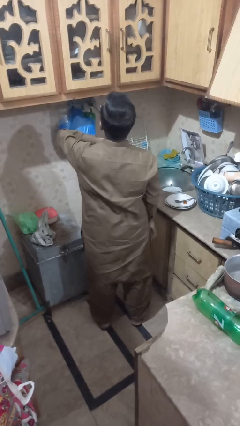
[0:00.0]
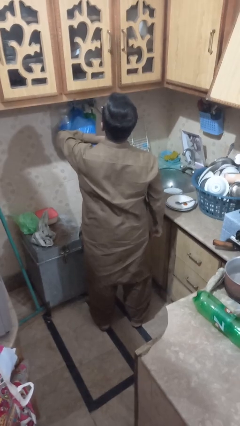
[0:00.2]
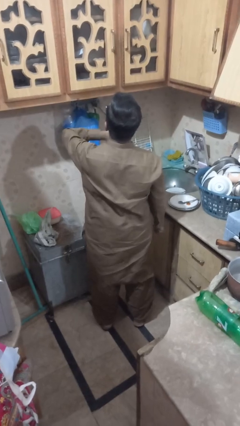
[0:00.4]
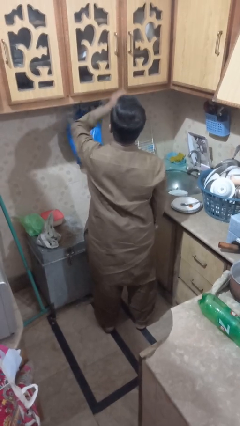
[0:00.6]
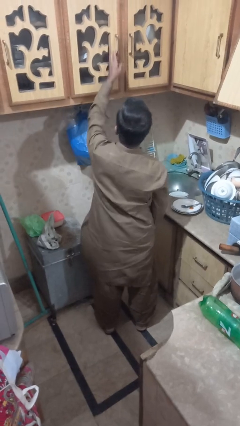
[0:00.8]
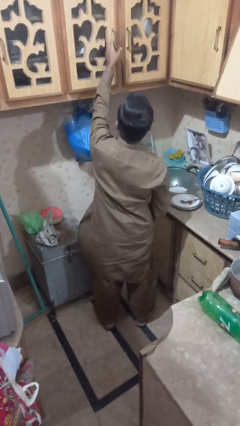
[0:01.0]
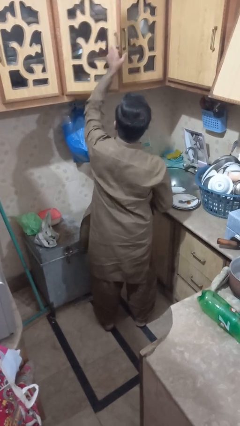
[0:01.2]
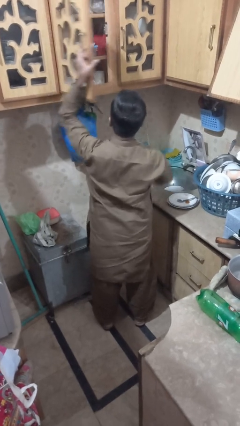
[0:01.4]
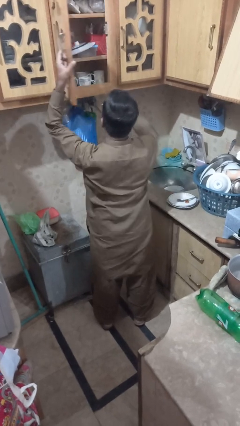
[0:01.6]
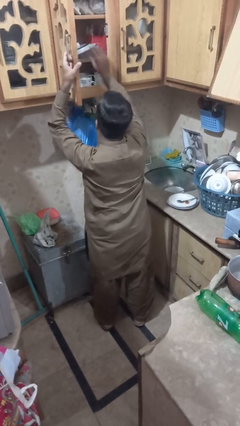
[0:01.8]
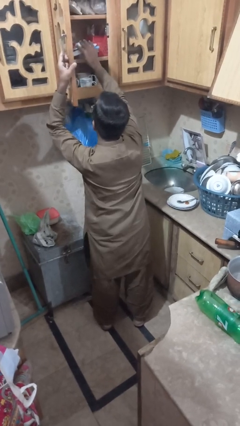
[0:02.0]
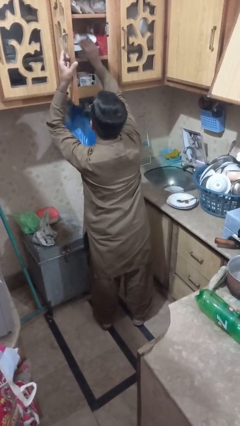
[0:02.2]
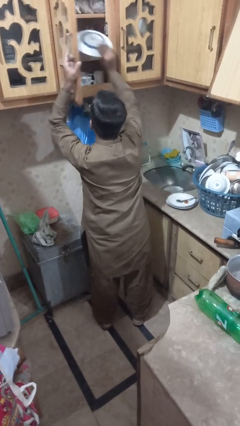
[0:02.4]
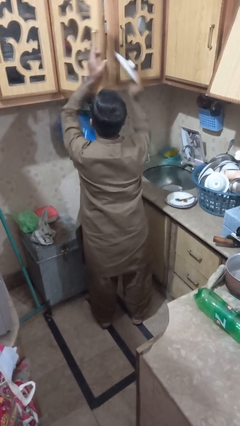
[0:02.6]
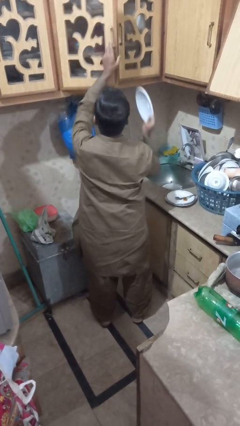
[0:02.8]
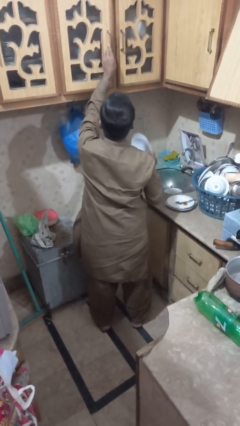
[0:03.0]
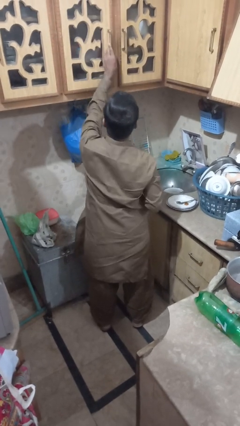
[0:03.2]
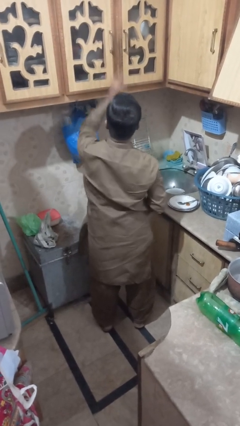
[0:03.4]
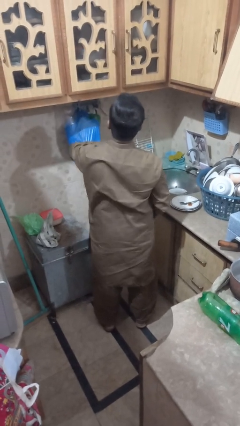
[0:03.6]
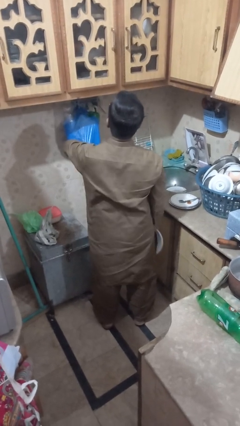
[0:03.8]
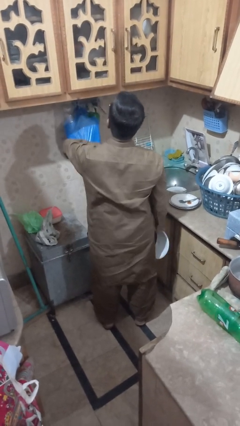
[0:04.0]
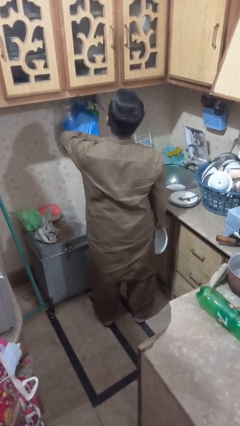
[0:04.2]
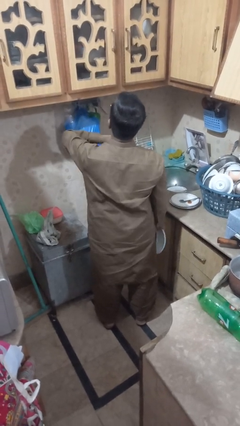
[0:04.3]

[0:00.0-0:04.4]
person takes object from cabinet

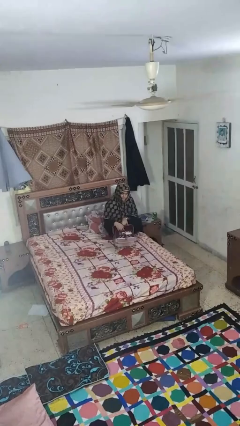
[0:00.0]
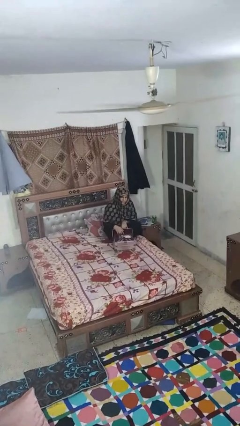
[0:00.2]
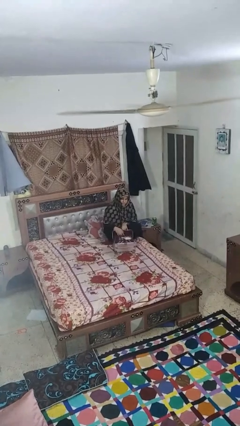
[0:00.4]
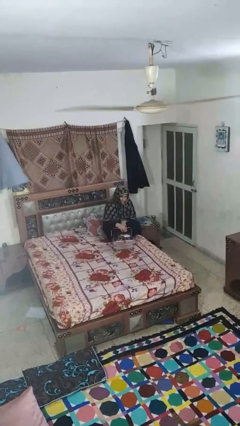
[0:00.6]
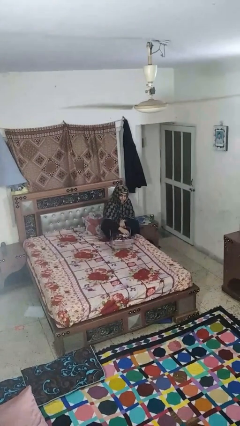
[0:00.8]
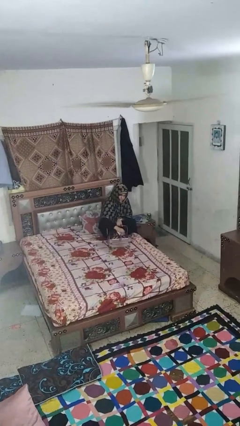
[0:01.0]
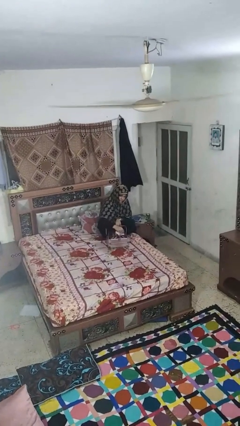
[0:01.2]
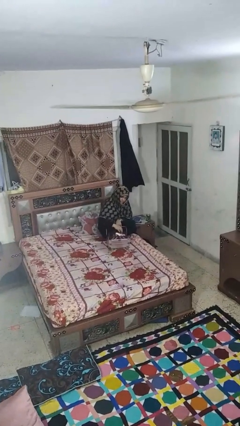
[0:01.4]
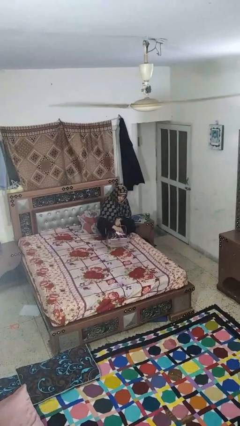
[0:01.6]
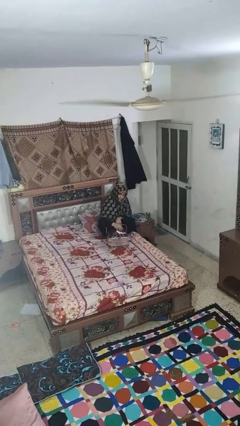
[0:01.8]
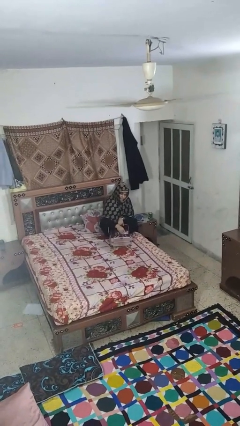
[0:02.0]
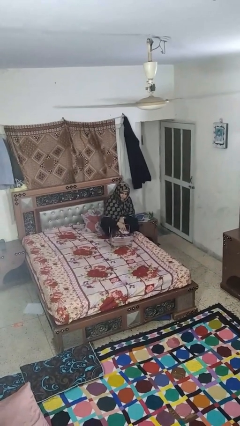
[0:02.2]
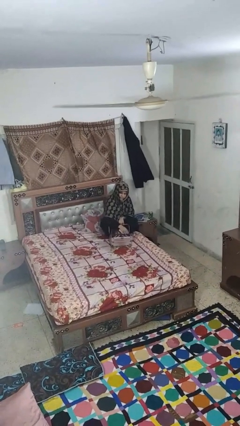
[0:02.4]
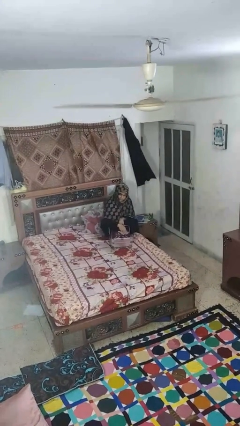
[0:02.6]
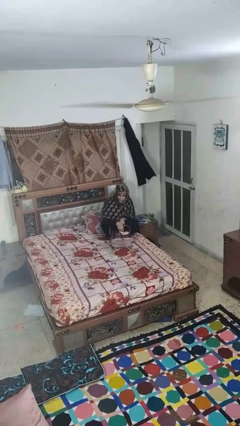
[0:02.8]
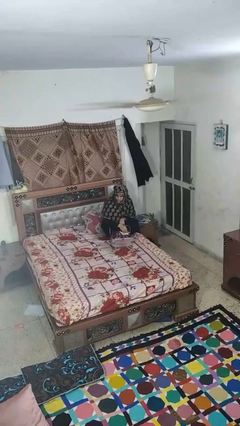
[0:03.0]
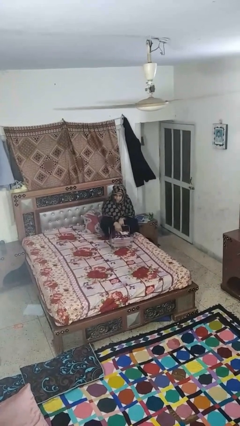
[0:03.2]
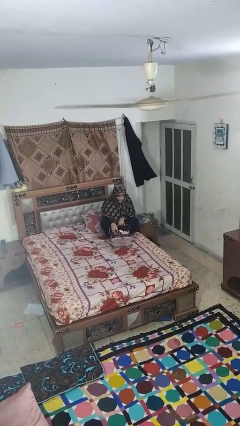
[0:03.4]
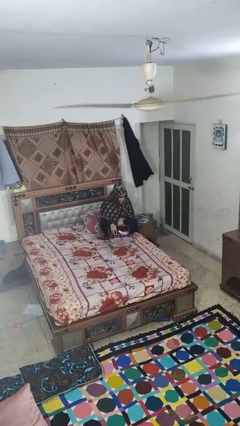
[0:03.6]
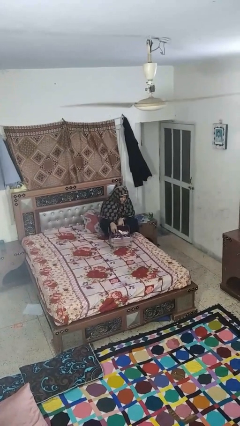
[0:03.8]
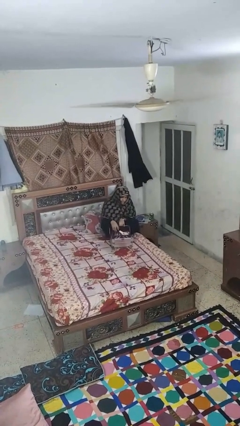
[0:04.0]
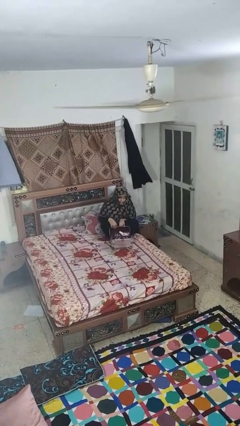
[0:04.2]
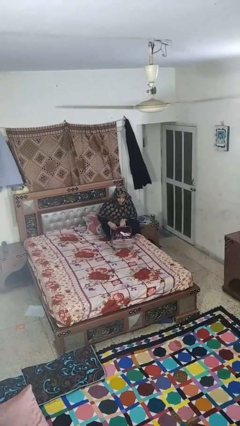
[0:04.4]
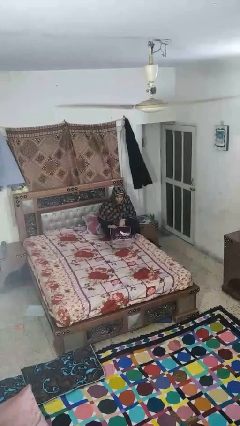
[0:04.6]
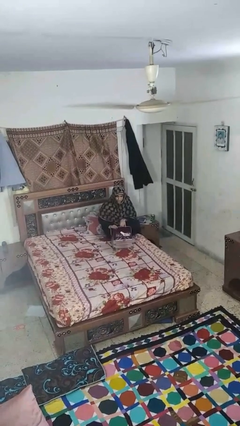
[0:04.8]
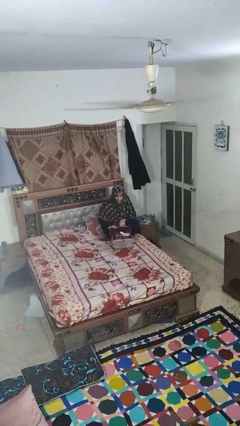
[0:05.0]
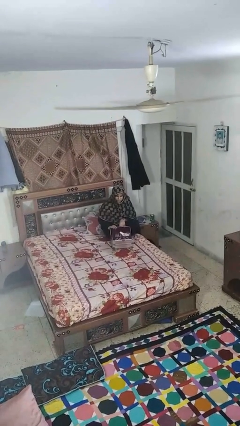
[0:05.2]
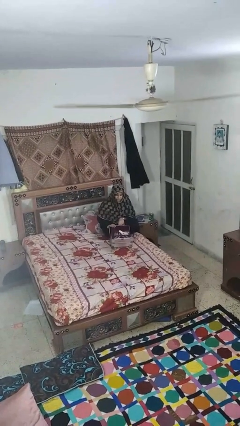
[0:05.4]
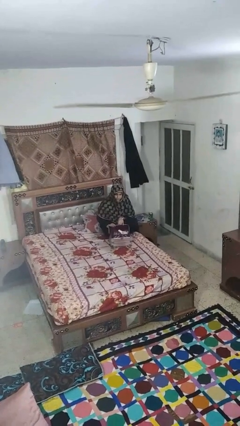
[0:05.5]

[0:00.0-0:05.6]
person searches jewelry box

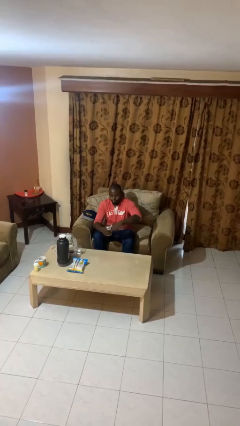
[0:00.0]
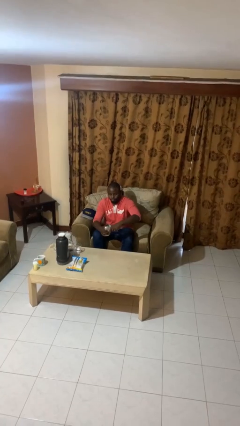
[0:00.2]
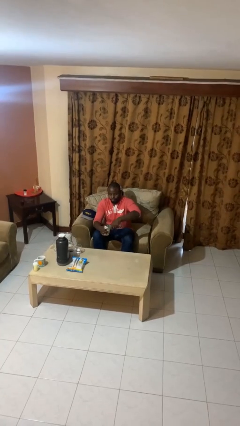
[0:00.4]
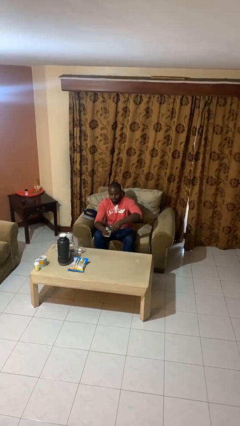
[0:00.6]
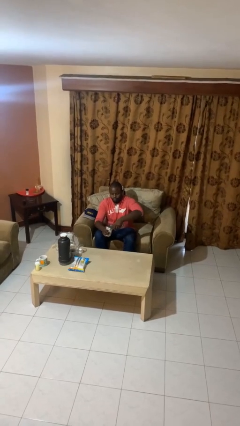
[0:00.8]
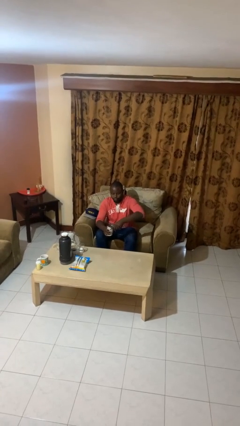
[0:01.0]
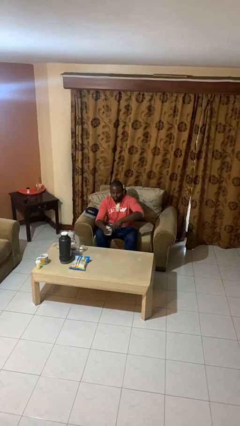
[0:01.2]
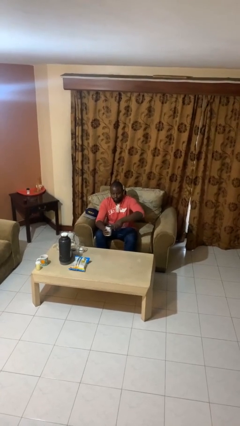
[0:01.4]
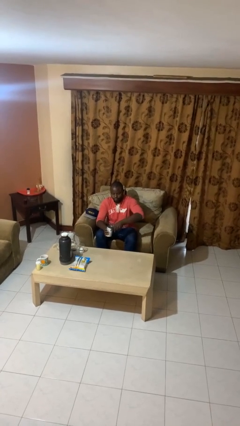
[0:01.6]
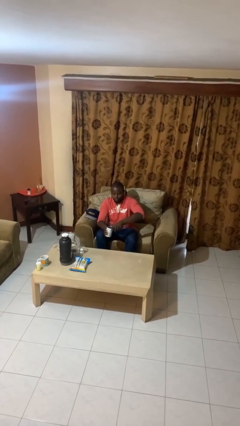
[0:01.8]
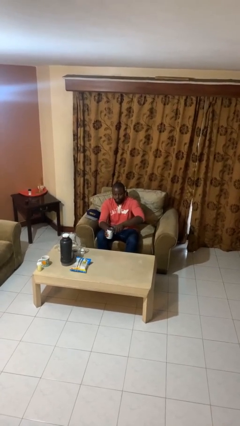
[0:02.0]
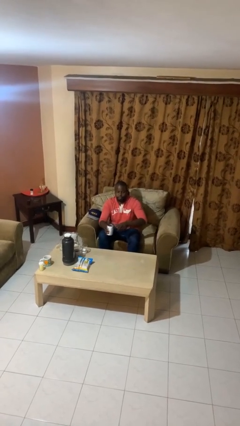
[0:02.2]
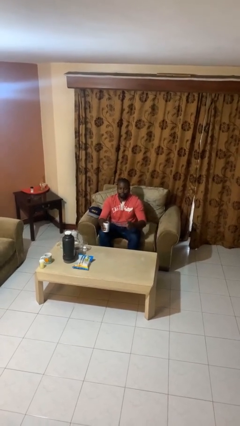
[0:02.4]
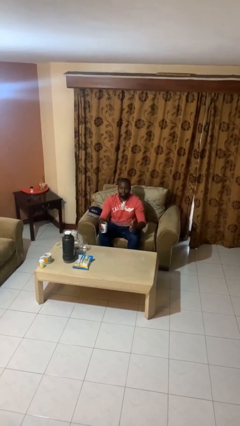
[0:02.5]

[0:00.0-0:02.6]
person opens can with can opener

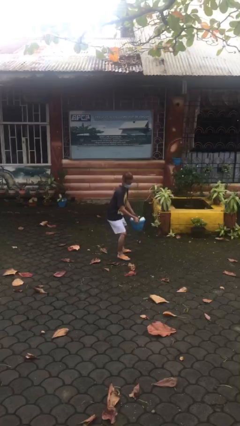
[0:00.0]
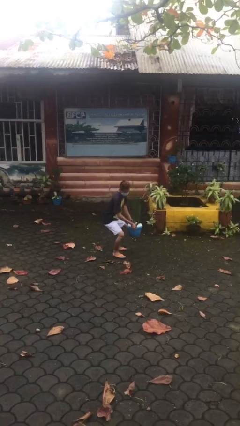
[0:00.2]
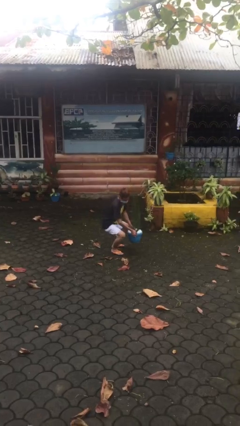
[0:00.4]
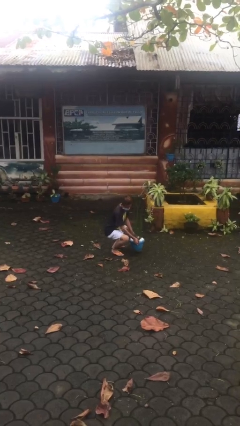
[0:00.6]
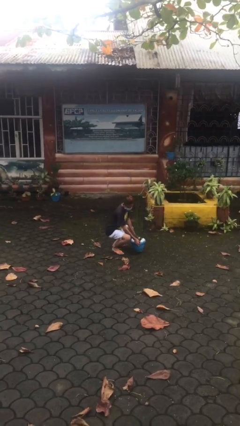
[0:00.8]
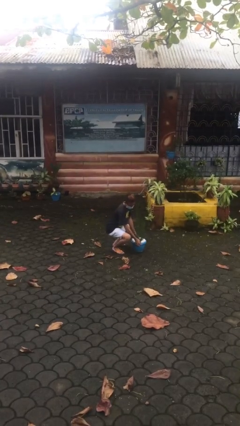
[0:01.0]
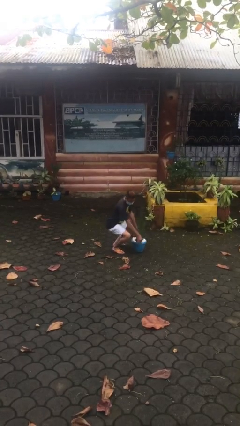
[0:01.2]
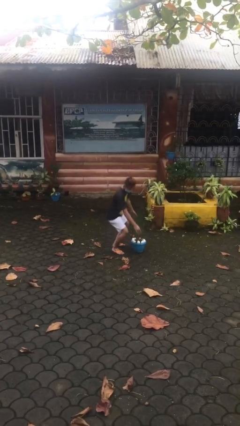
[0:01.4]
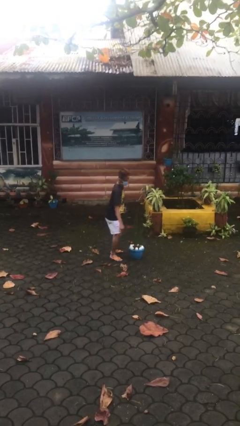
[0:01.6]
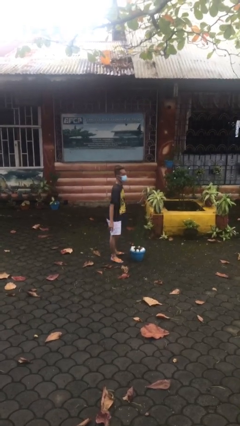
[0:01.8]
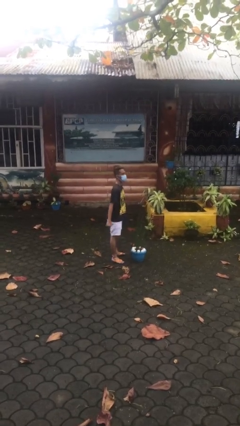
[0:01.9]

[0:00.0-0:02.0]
person puts down object on floor

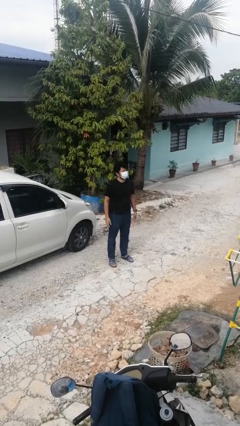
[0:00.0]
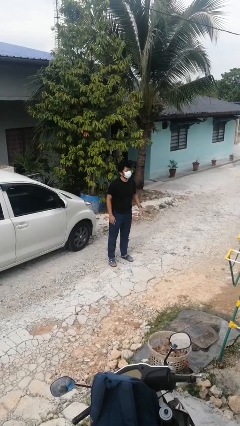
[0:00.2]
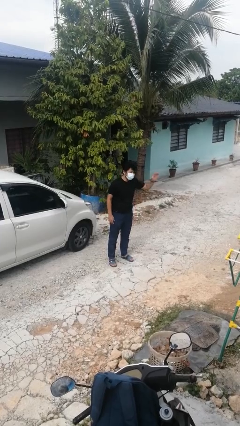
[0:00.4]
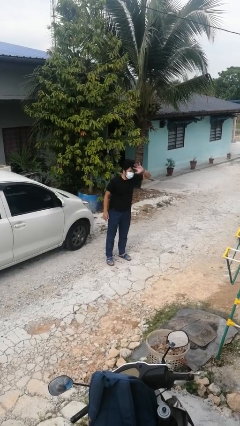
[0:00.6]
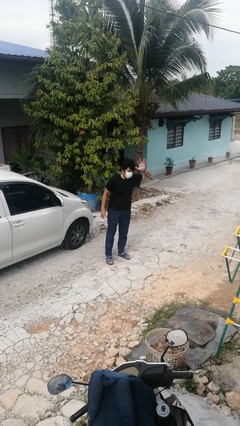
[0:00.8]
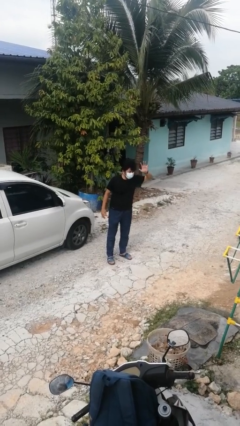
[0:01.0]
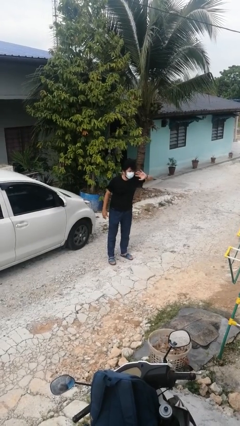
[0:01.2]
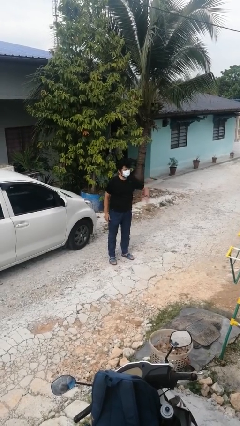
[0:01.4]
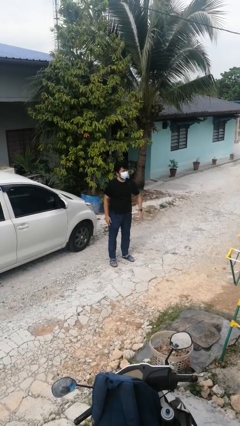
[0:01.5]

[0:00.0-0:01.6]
person waves at person

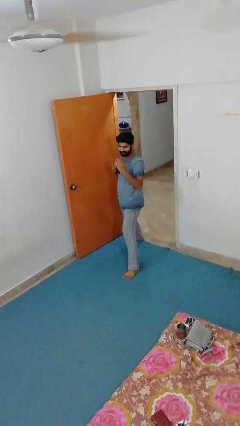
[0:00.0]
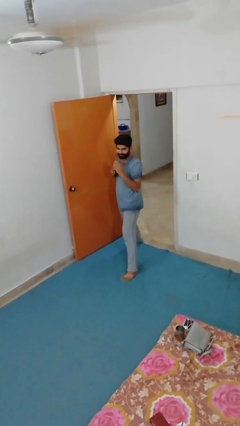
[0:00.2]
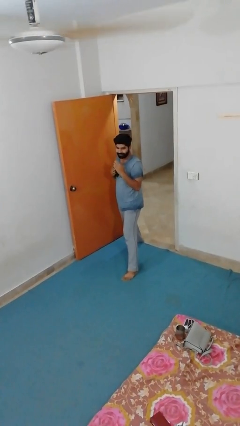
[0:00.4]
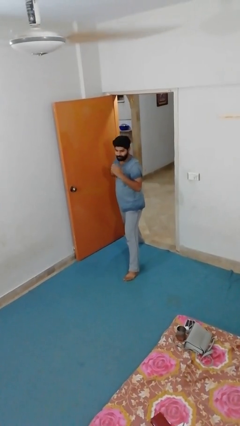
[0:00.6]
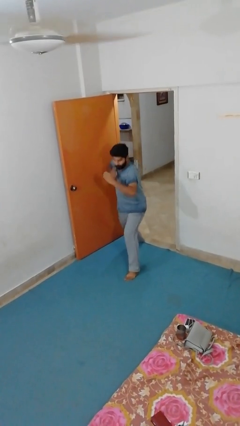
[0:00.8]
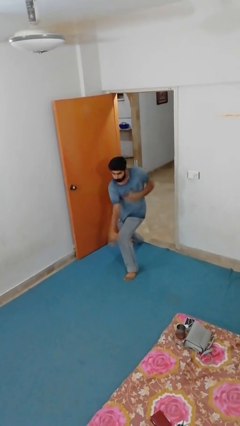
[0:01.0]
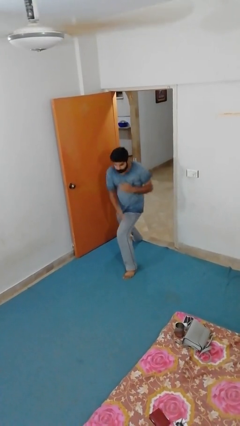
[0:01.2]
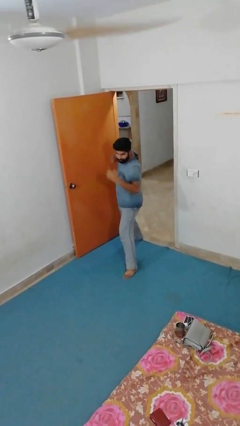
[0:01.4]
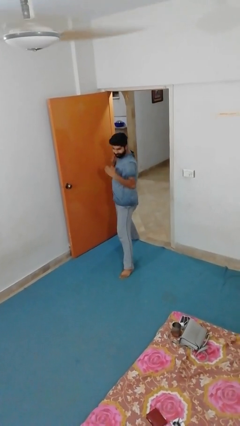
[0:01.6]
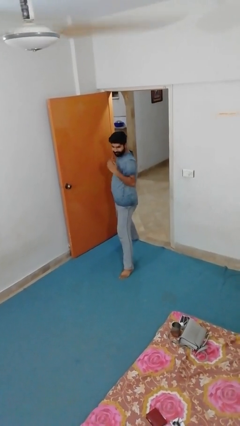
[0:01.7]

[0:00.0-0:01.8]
person karate chop
